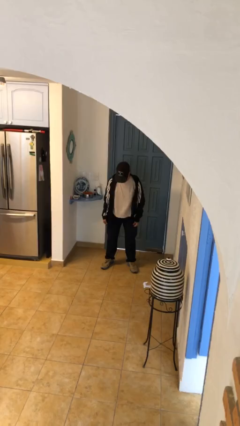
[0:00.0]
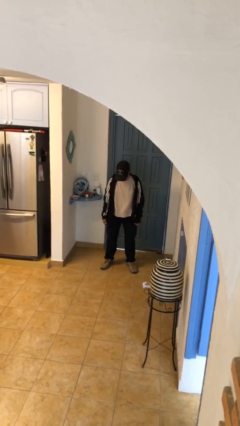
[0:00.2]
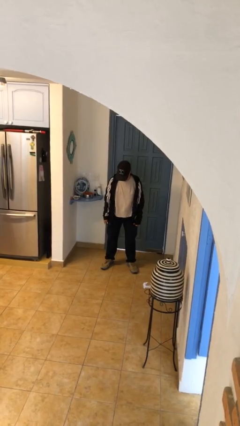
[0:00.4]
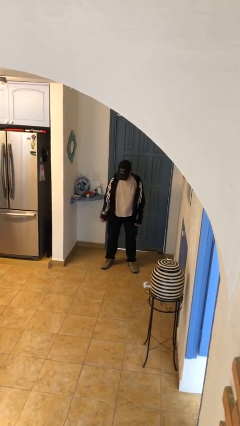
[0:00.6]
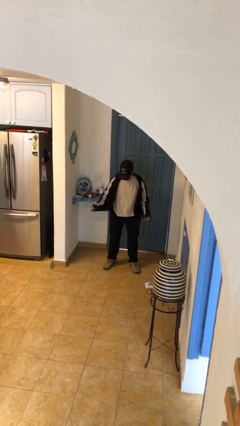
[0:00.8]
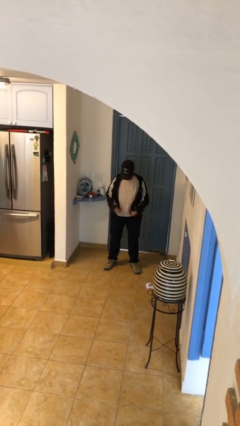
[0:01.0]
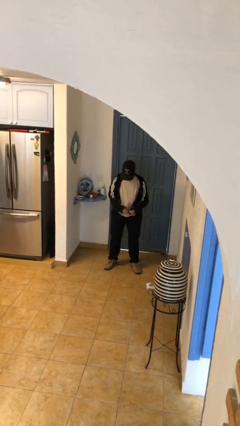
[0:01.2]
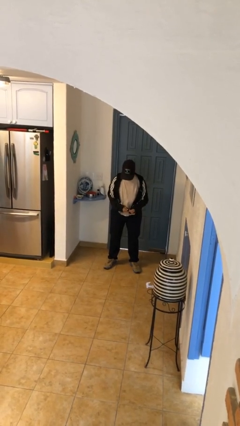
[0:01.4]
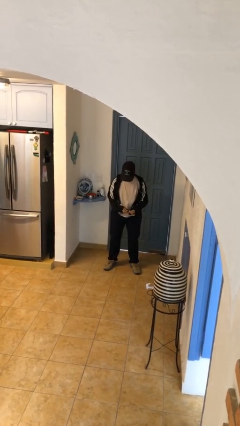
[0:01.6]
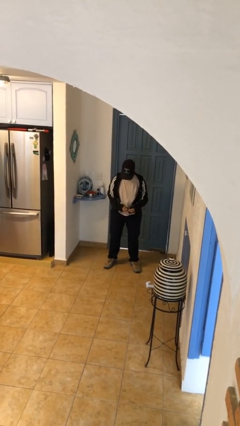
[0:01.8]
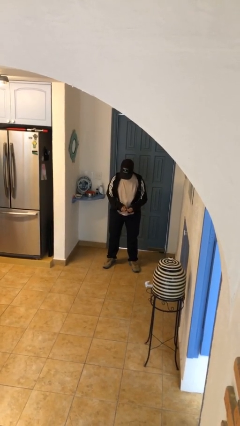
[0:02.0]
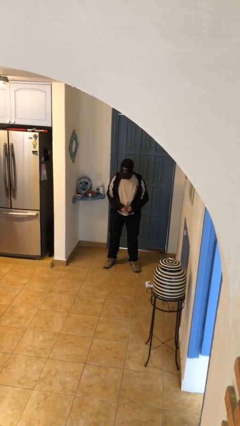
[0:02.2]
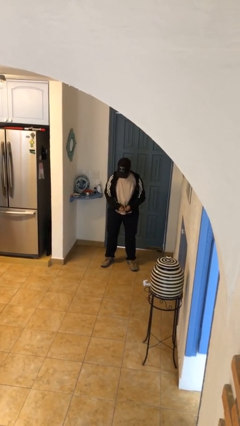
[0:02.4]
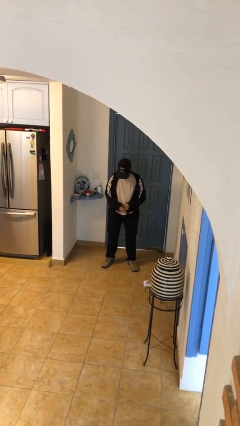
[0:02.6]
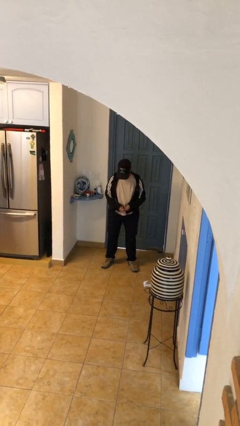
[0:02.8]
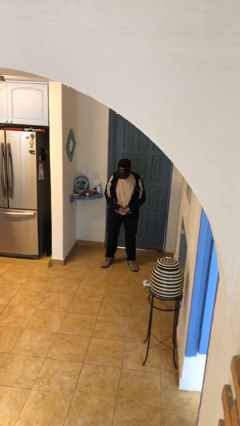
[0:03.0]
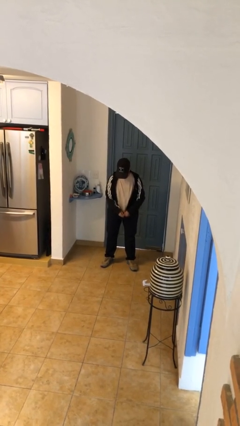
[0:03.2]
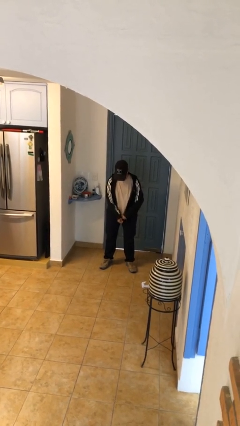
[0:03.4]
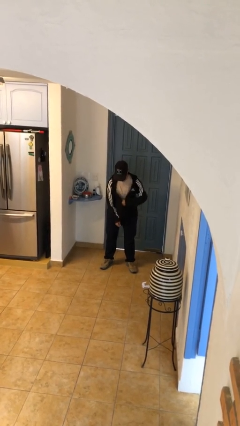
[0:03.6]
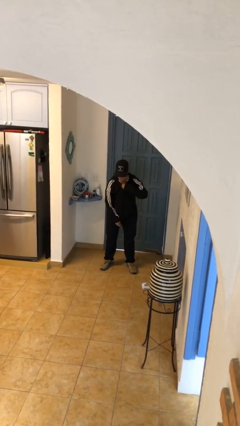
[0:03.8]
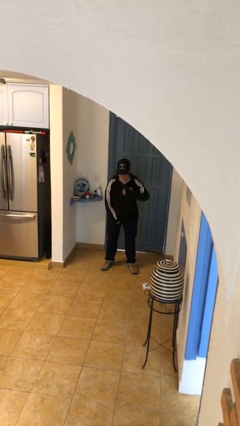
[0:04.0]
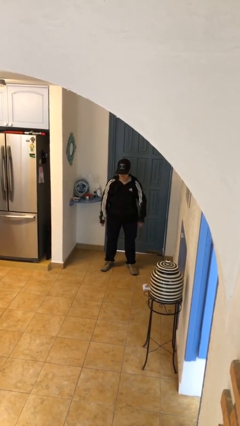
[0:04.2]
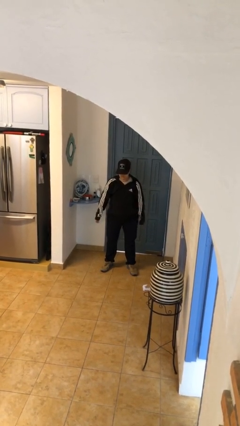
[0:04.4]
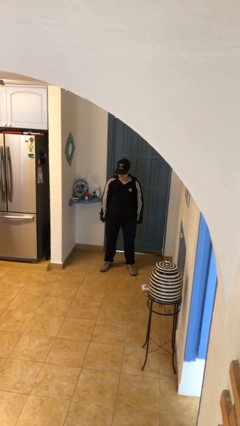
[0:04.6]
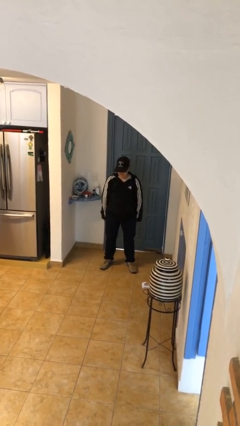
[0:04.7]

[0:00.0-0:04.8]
person zips up jacket

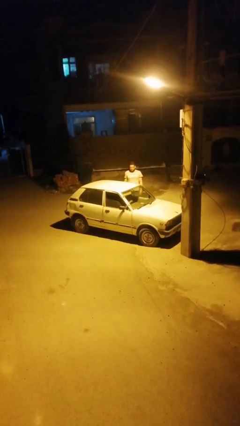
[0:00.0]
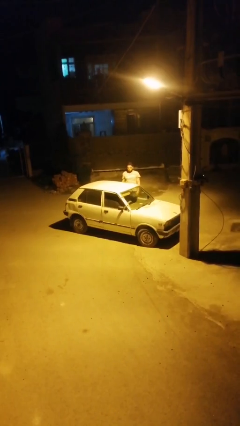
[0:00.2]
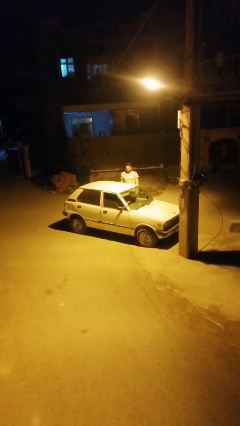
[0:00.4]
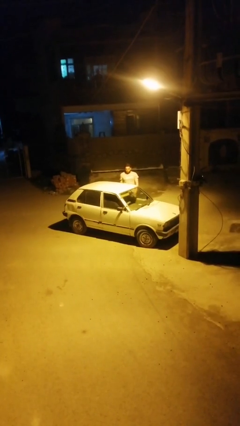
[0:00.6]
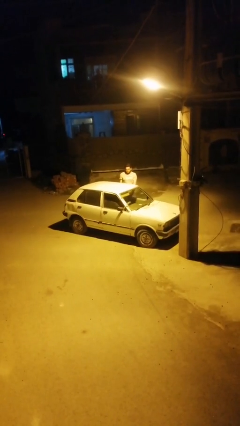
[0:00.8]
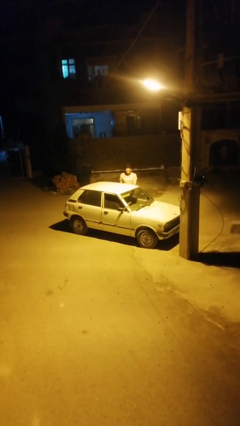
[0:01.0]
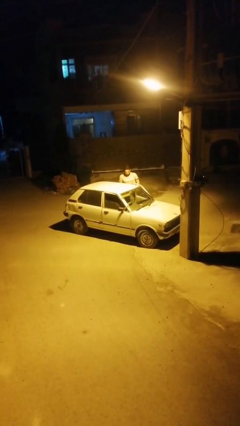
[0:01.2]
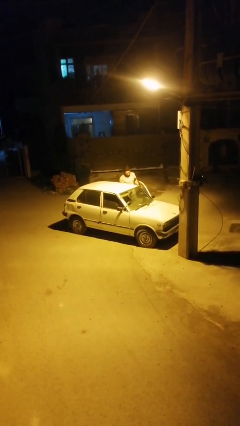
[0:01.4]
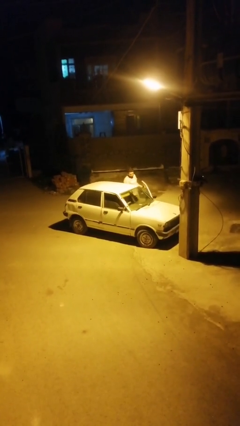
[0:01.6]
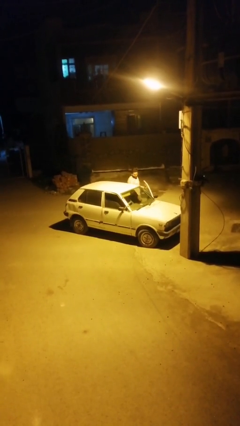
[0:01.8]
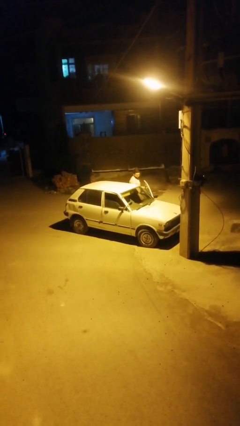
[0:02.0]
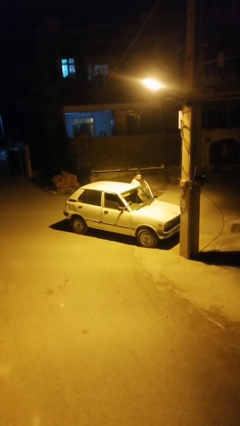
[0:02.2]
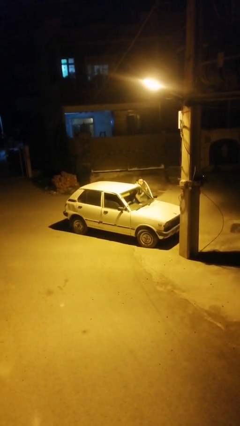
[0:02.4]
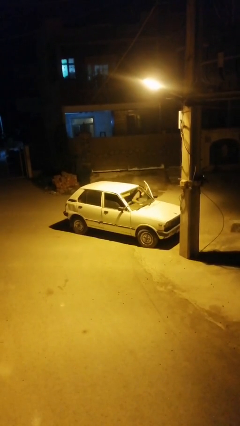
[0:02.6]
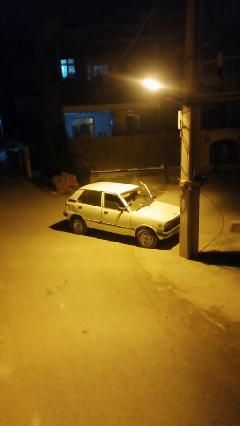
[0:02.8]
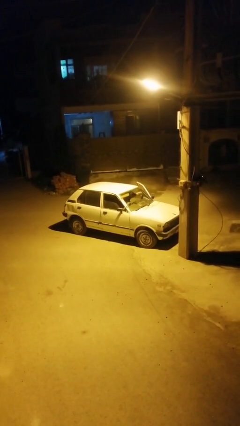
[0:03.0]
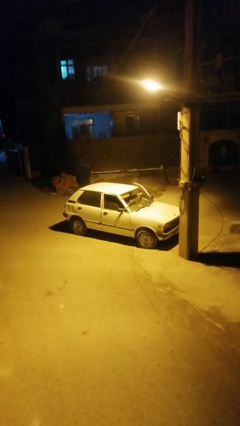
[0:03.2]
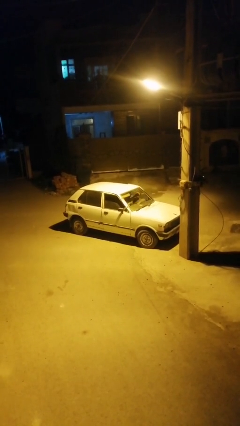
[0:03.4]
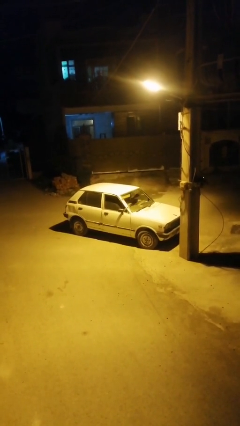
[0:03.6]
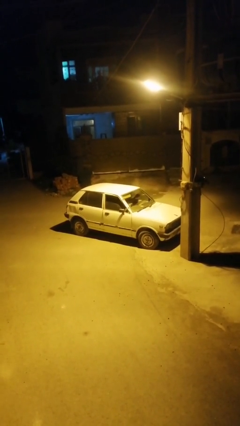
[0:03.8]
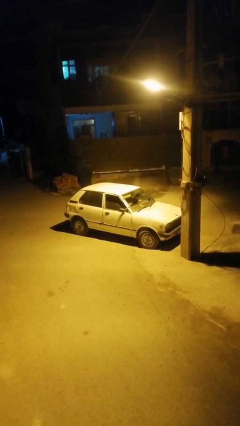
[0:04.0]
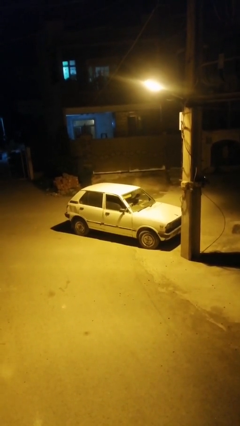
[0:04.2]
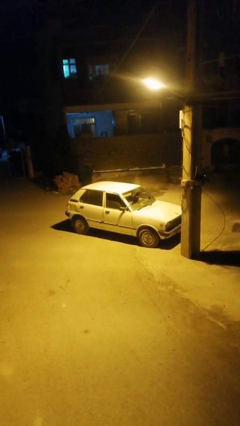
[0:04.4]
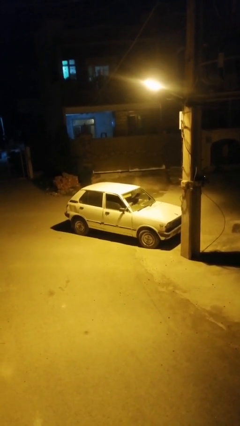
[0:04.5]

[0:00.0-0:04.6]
car picks up person

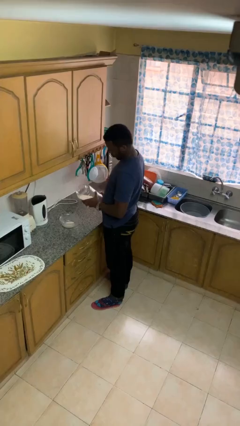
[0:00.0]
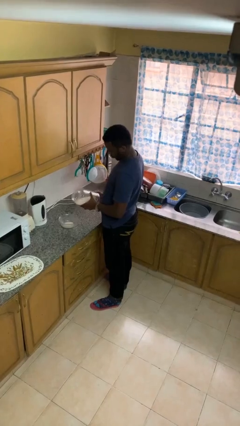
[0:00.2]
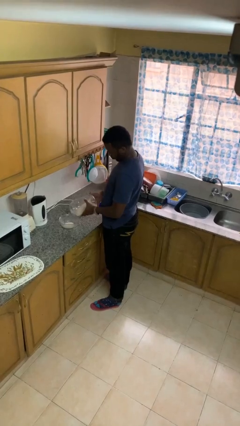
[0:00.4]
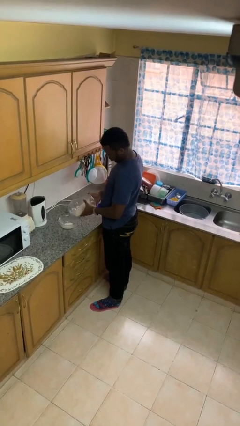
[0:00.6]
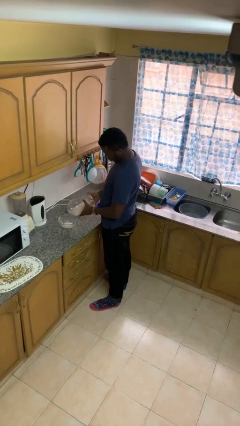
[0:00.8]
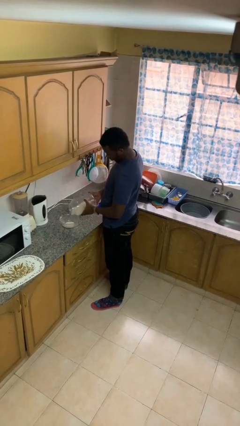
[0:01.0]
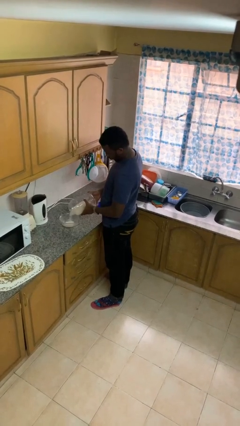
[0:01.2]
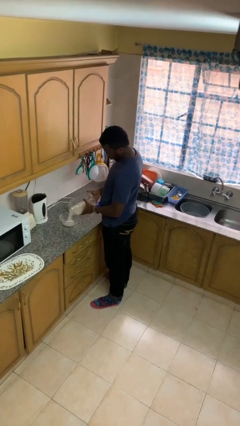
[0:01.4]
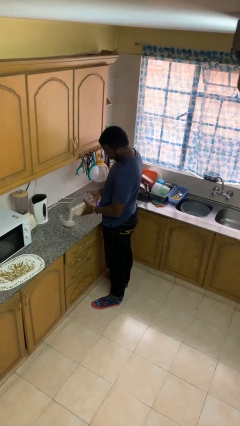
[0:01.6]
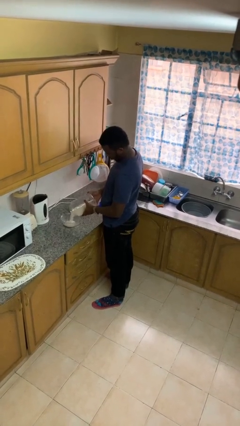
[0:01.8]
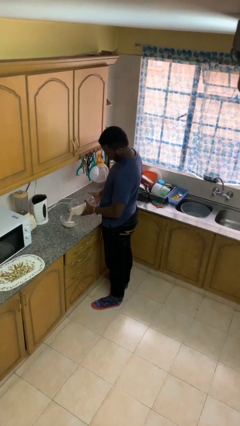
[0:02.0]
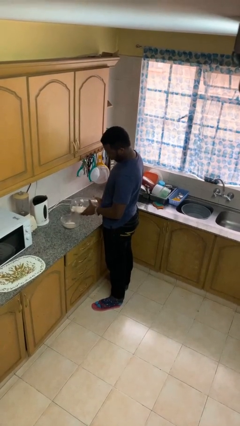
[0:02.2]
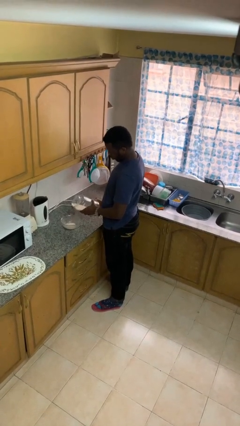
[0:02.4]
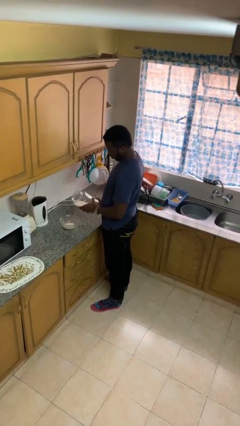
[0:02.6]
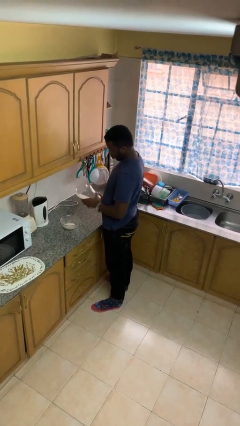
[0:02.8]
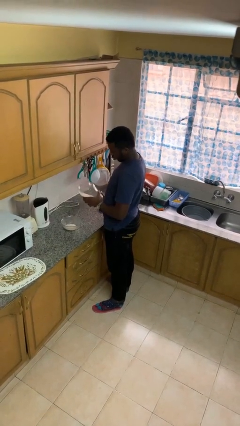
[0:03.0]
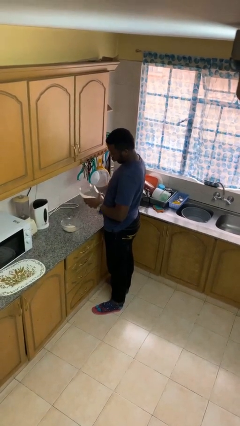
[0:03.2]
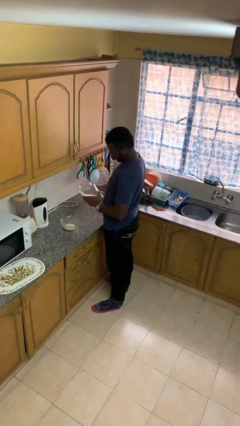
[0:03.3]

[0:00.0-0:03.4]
person pours into bowl

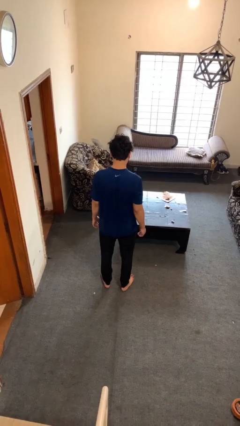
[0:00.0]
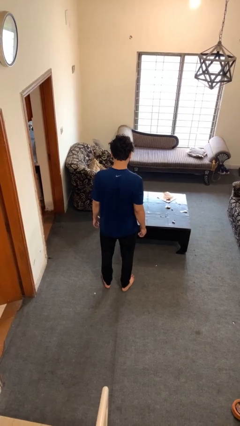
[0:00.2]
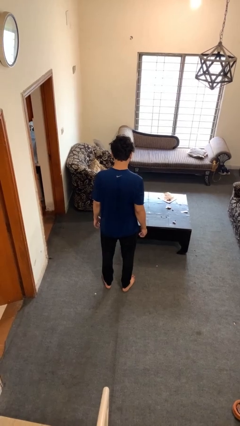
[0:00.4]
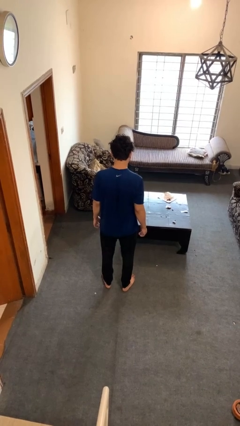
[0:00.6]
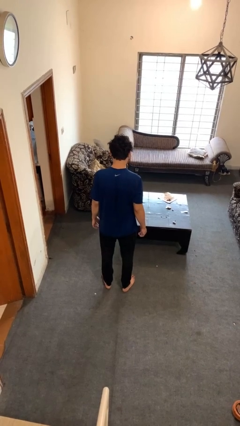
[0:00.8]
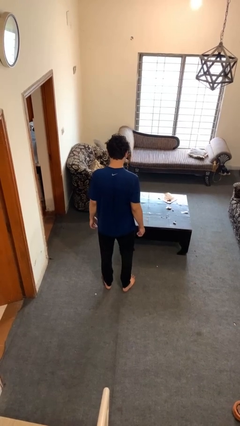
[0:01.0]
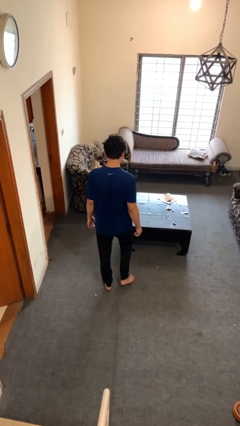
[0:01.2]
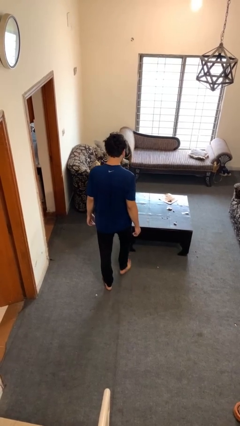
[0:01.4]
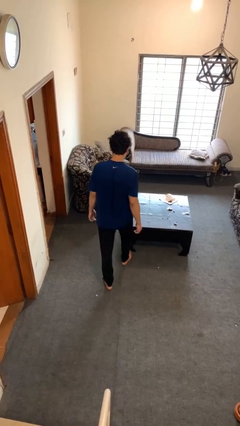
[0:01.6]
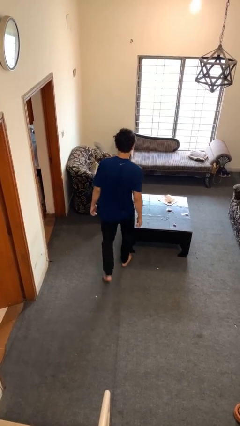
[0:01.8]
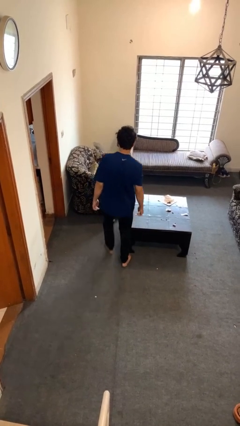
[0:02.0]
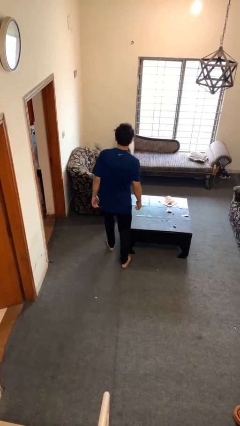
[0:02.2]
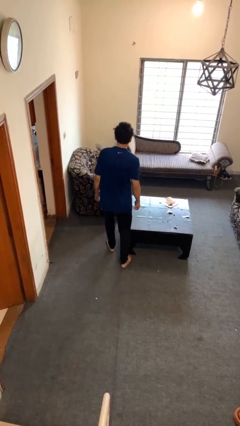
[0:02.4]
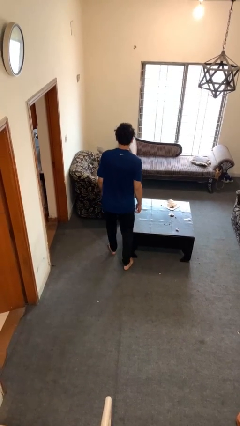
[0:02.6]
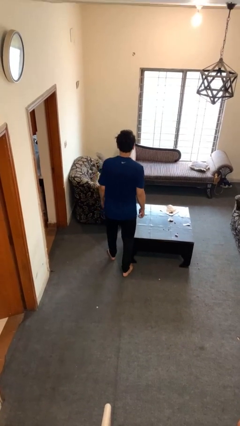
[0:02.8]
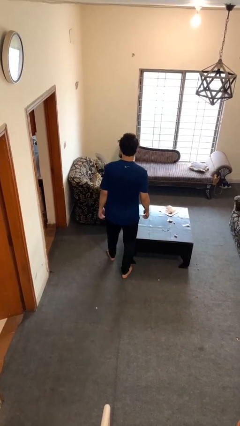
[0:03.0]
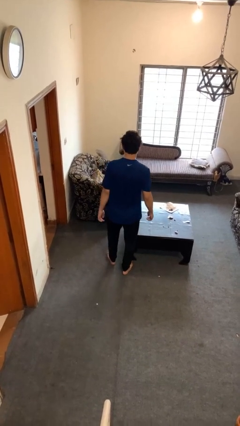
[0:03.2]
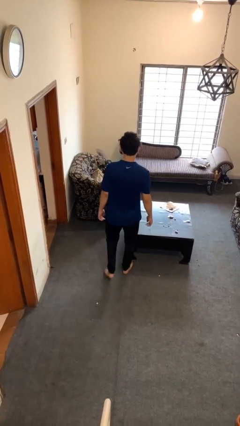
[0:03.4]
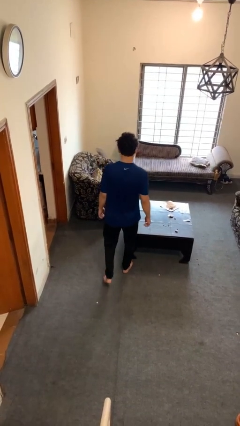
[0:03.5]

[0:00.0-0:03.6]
person bumps into table

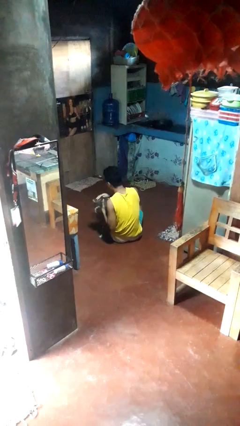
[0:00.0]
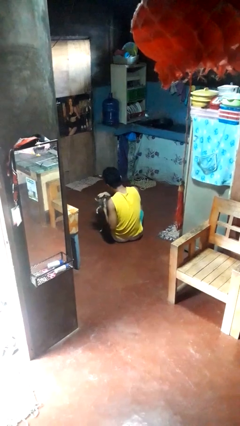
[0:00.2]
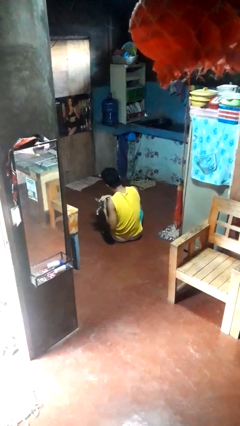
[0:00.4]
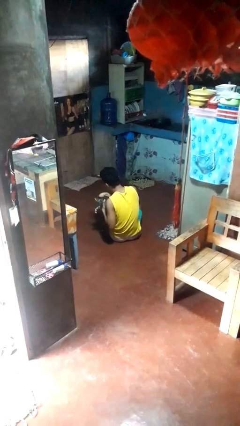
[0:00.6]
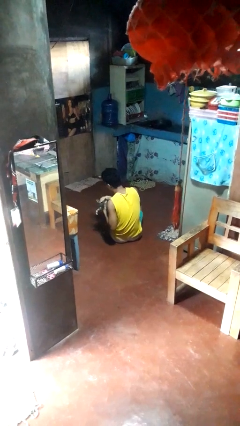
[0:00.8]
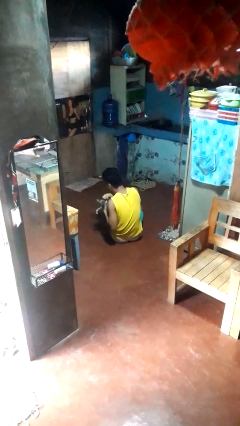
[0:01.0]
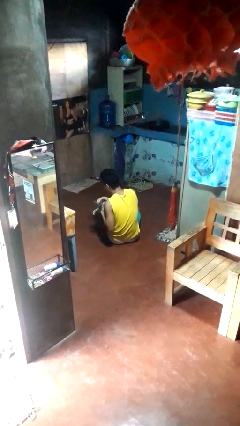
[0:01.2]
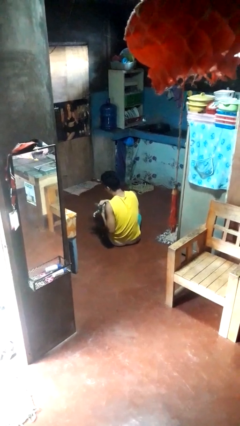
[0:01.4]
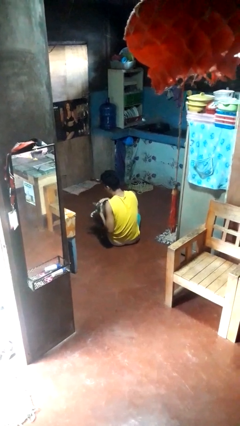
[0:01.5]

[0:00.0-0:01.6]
person hugs cat
